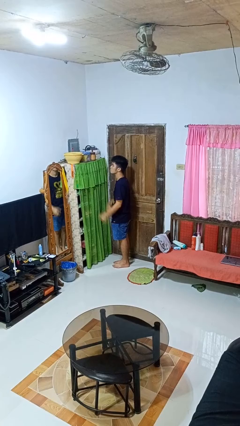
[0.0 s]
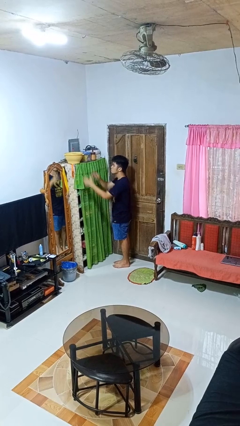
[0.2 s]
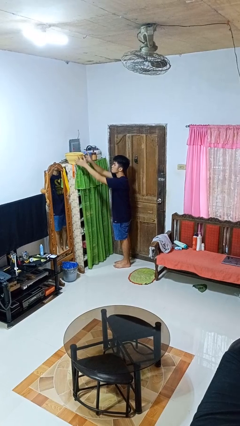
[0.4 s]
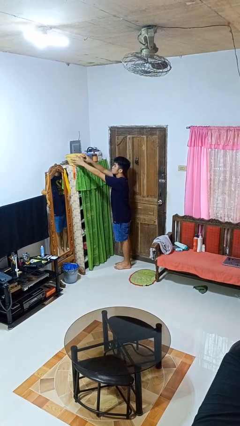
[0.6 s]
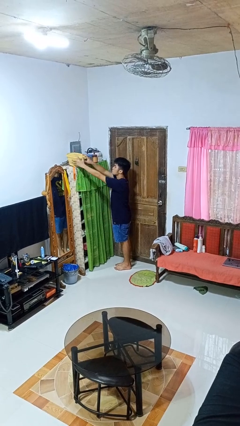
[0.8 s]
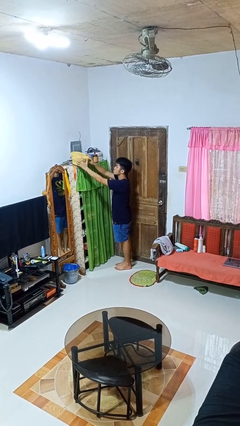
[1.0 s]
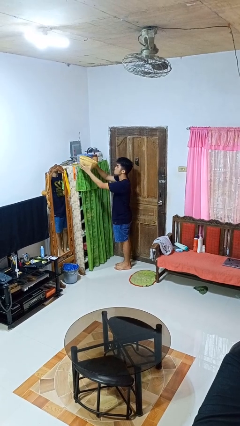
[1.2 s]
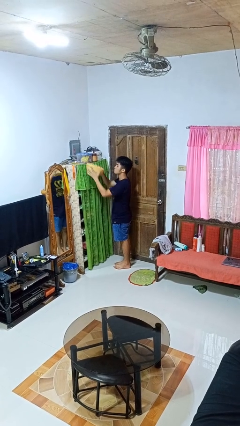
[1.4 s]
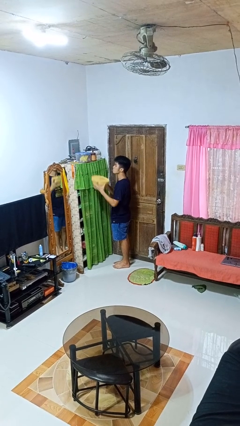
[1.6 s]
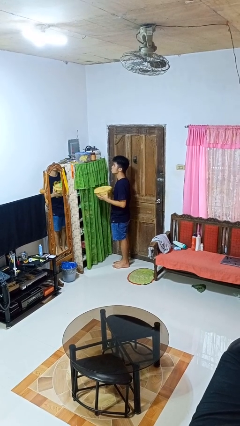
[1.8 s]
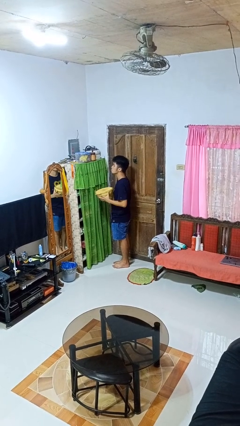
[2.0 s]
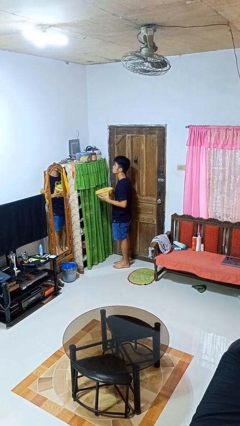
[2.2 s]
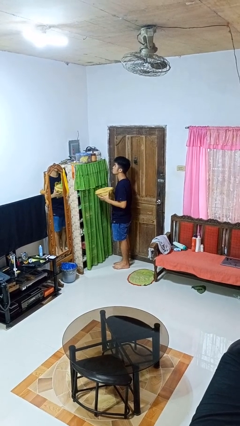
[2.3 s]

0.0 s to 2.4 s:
person picks up object from shelf

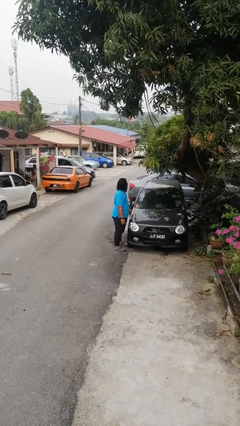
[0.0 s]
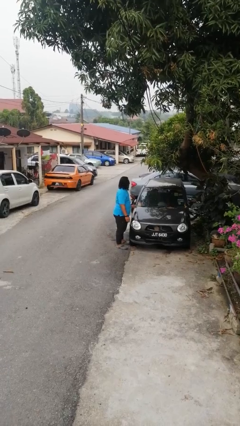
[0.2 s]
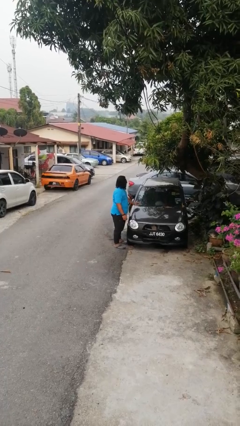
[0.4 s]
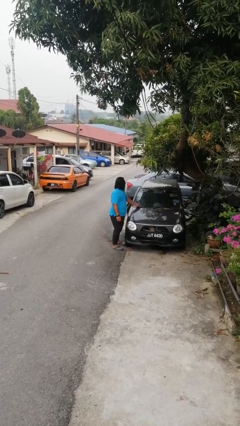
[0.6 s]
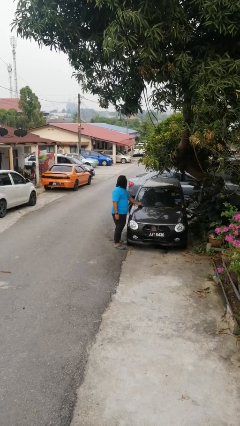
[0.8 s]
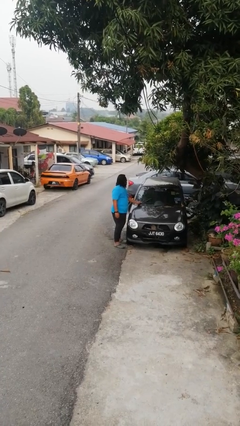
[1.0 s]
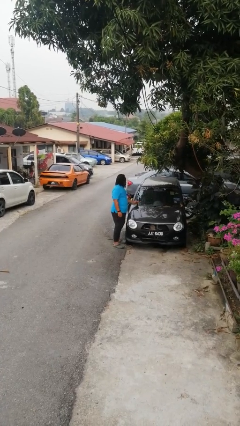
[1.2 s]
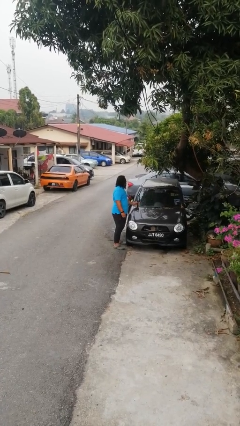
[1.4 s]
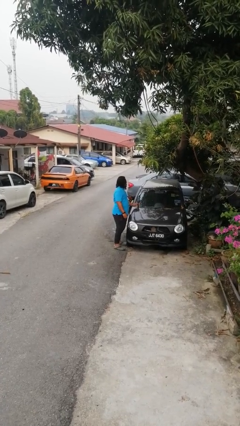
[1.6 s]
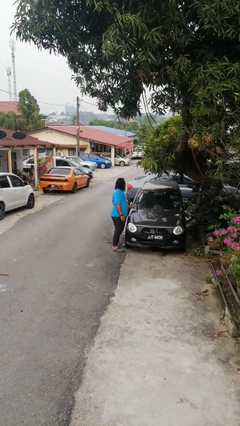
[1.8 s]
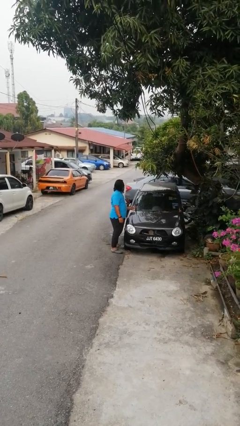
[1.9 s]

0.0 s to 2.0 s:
person flips up car wipers

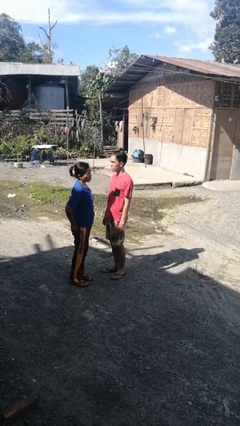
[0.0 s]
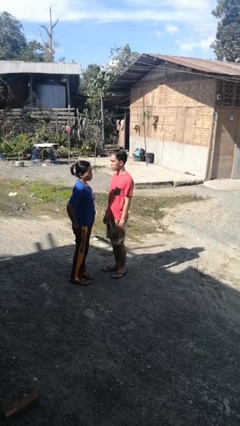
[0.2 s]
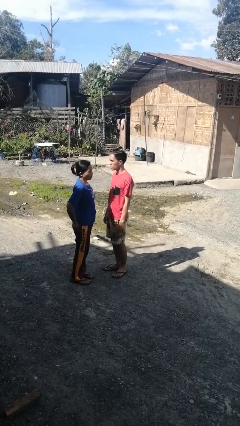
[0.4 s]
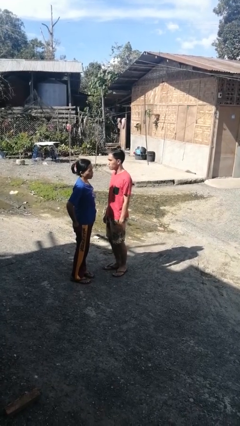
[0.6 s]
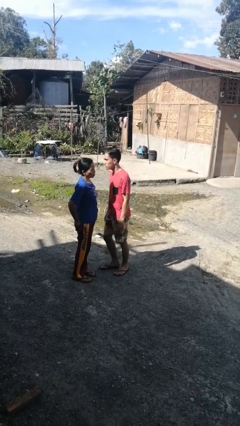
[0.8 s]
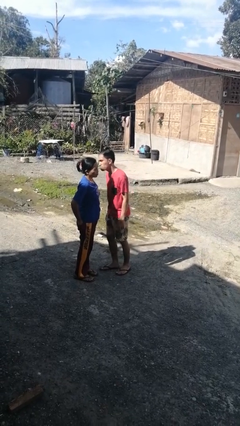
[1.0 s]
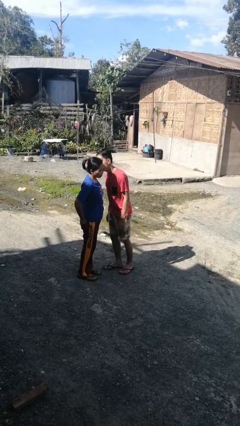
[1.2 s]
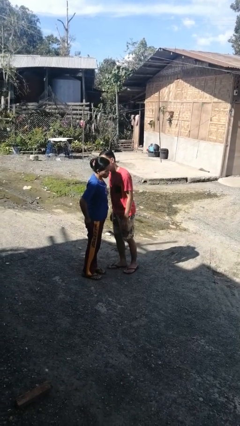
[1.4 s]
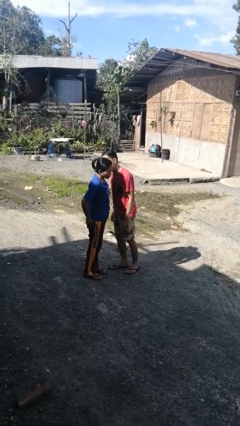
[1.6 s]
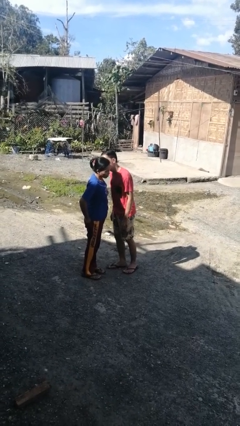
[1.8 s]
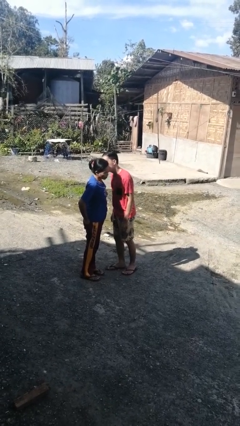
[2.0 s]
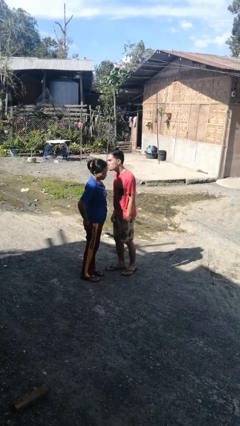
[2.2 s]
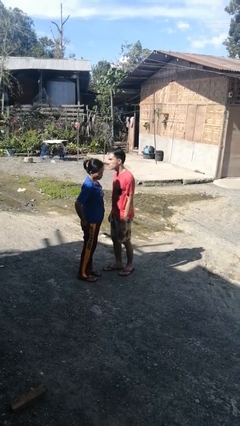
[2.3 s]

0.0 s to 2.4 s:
person kisses cheek of person

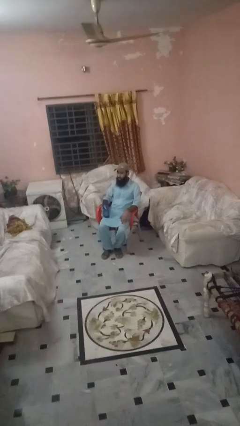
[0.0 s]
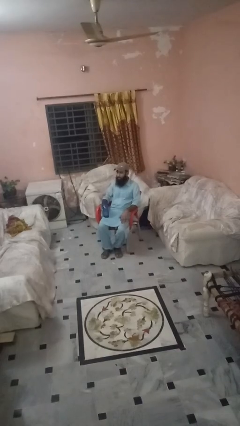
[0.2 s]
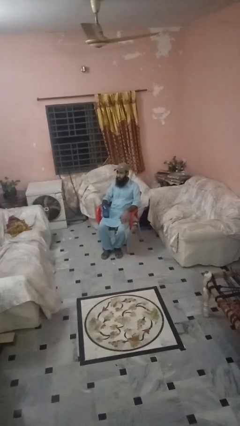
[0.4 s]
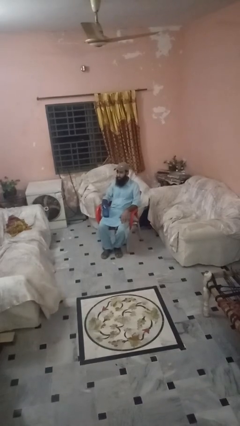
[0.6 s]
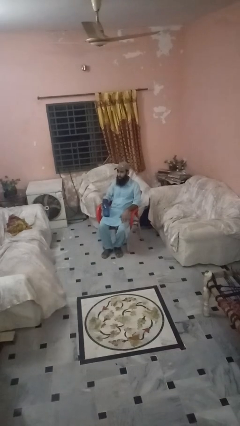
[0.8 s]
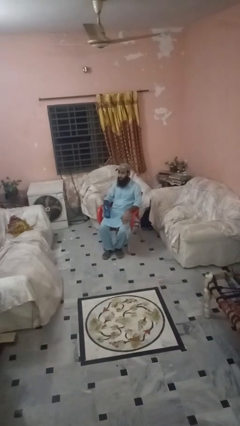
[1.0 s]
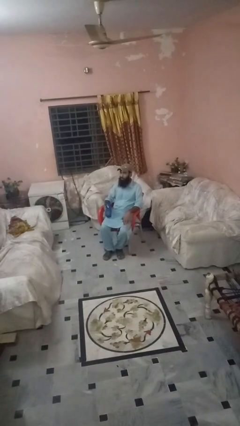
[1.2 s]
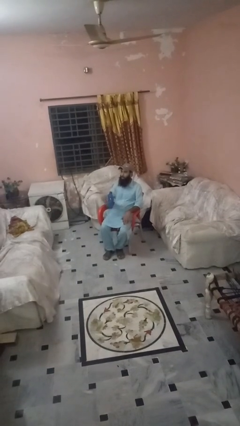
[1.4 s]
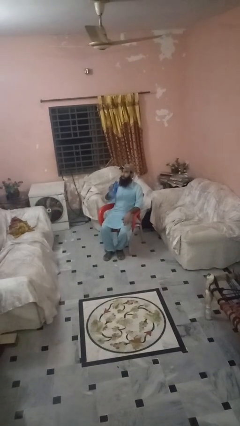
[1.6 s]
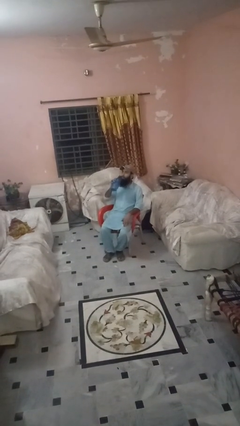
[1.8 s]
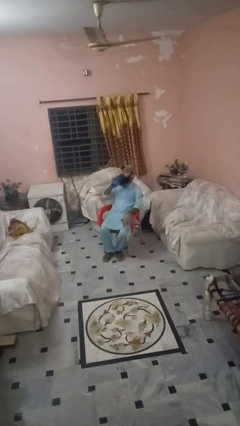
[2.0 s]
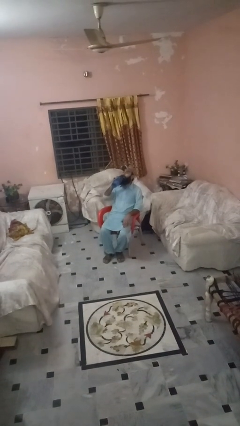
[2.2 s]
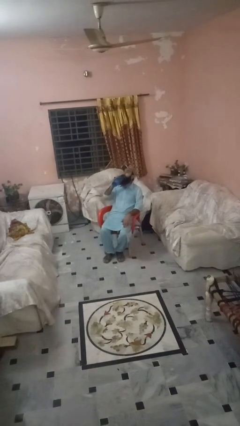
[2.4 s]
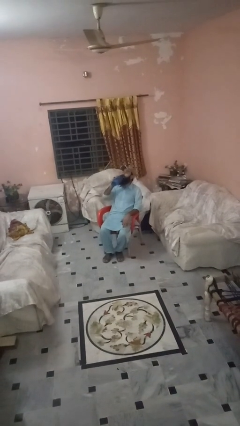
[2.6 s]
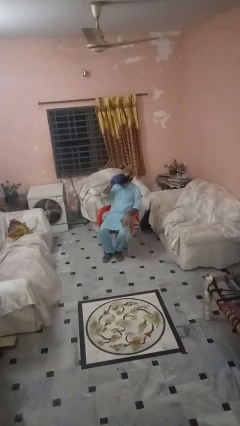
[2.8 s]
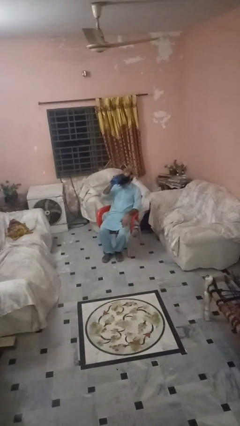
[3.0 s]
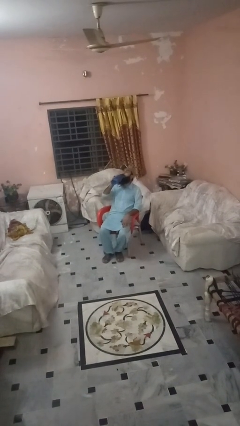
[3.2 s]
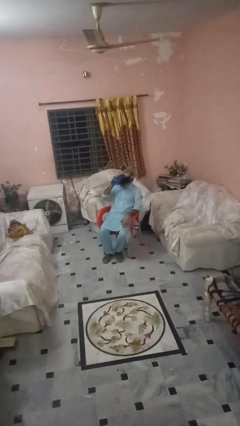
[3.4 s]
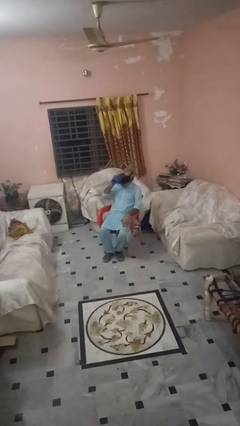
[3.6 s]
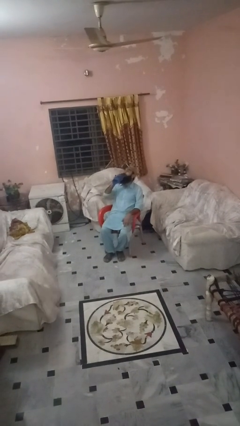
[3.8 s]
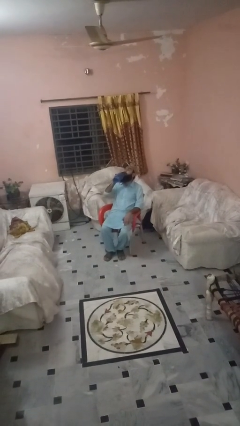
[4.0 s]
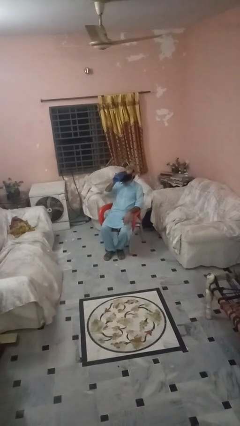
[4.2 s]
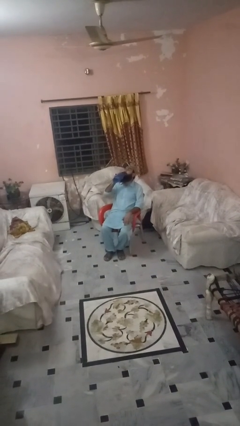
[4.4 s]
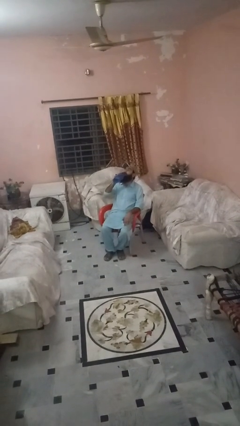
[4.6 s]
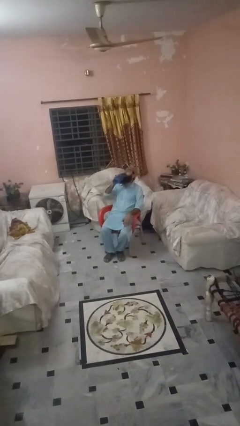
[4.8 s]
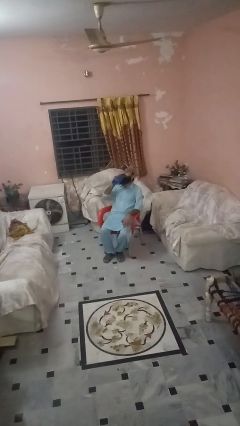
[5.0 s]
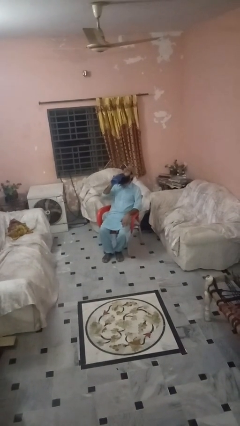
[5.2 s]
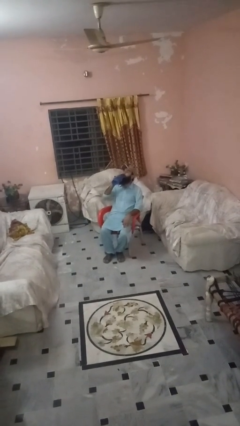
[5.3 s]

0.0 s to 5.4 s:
person drinks from bottle

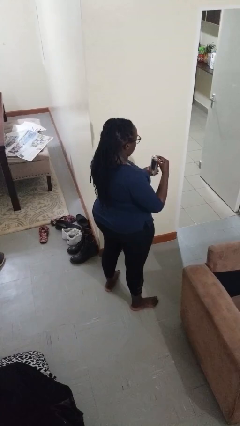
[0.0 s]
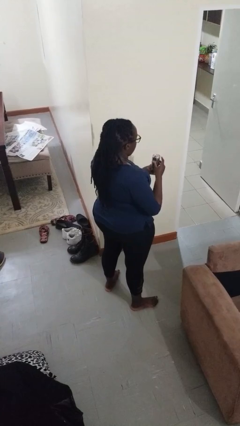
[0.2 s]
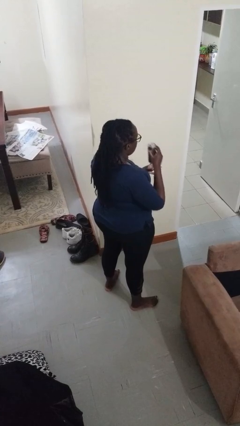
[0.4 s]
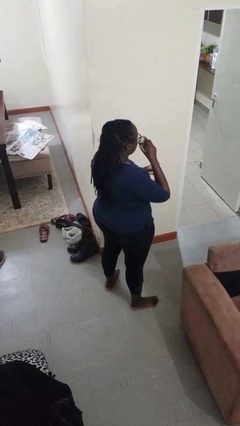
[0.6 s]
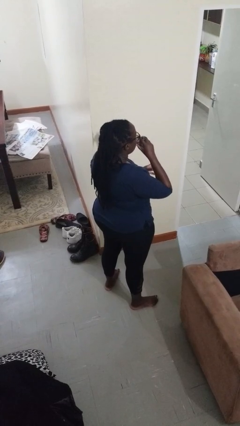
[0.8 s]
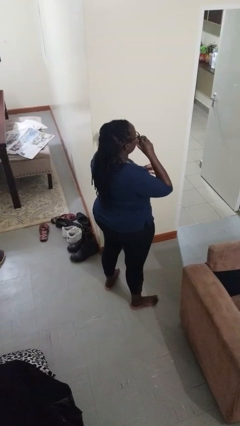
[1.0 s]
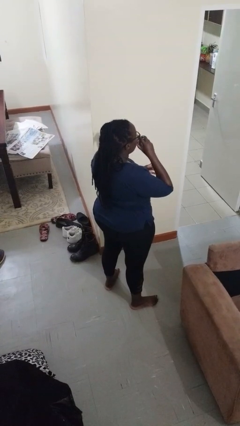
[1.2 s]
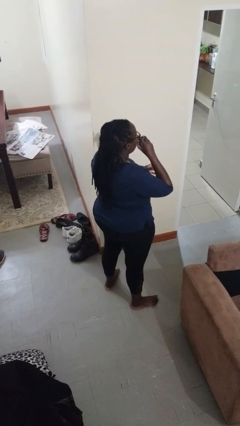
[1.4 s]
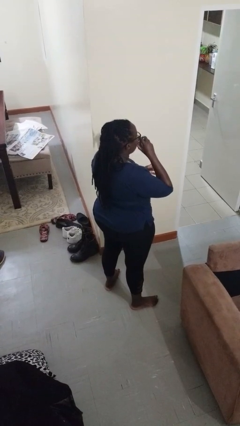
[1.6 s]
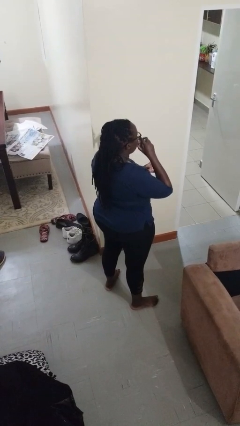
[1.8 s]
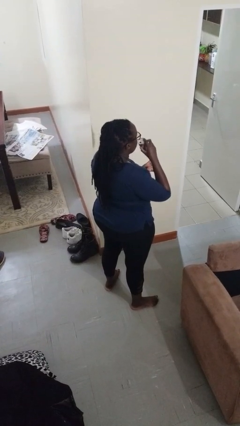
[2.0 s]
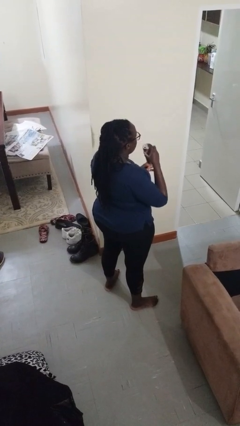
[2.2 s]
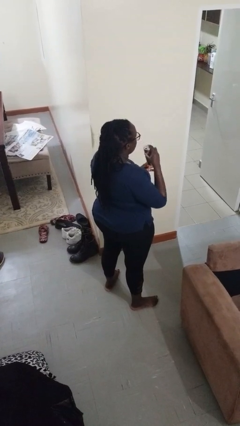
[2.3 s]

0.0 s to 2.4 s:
person drinks from beverage can

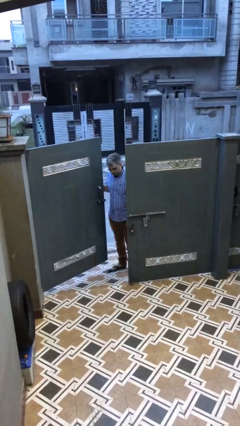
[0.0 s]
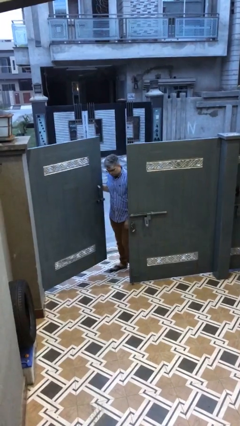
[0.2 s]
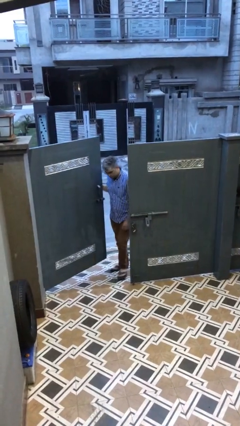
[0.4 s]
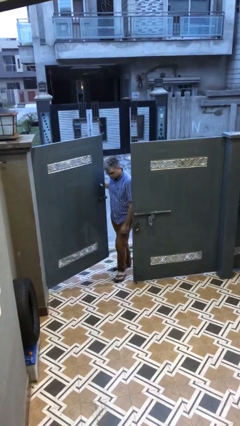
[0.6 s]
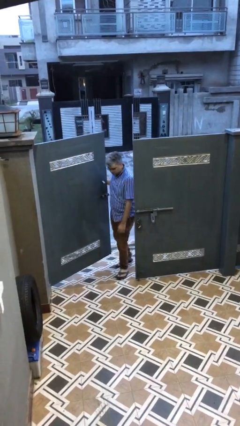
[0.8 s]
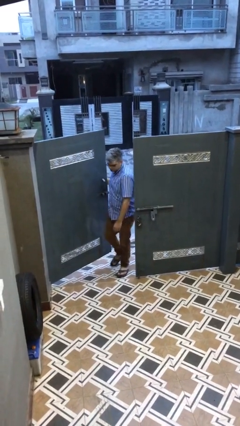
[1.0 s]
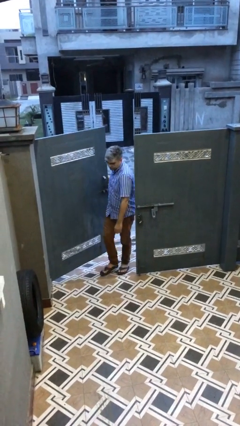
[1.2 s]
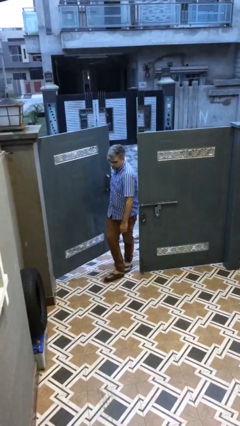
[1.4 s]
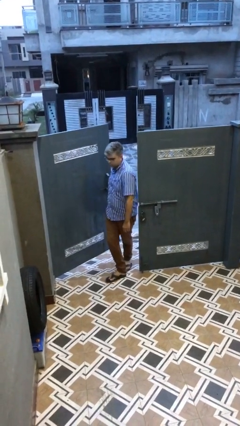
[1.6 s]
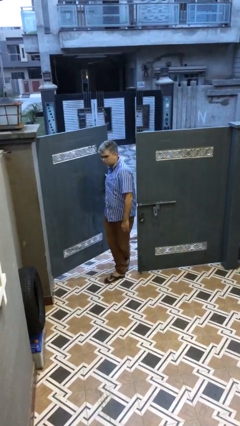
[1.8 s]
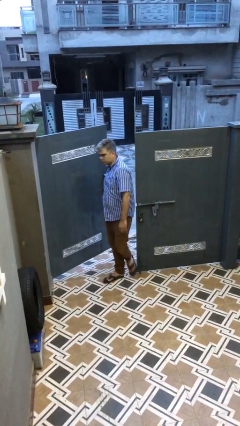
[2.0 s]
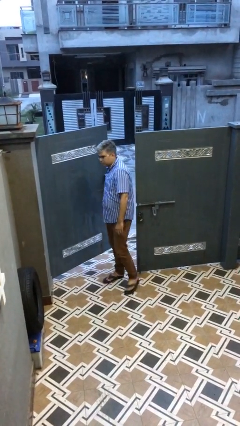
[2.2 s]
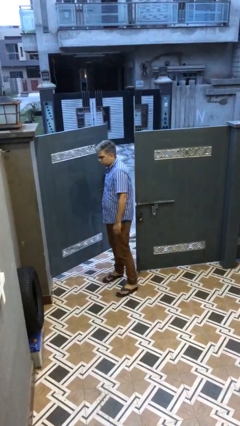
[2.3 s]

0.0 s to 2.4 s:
person enters scene through structure

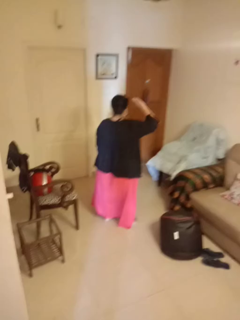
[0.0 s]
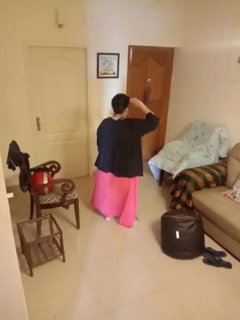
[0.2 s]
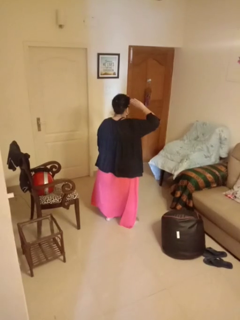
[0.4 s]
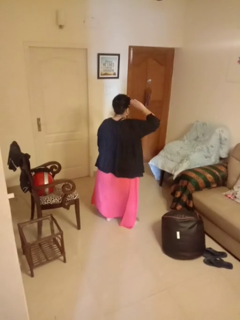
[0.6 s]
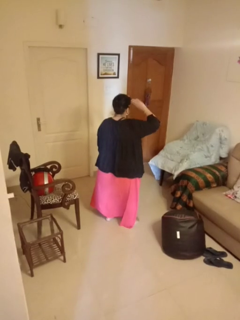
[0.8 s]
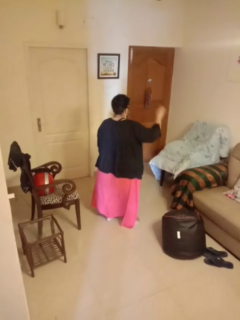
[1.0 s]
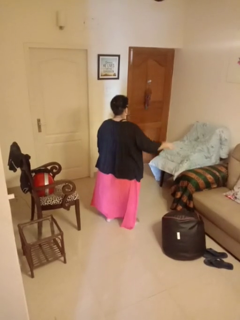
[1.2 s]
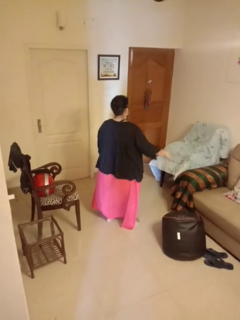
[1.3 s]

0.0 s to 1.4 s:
person salutes
